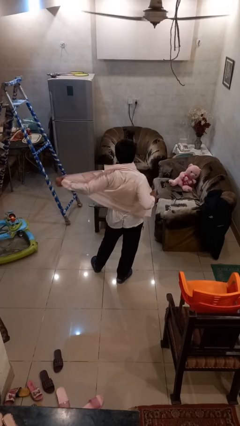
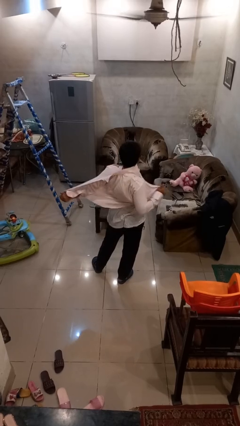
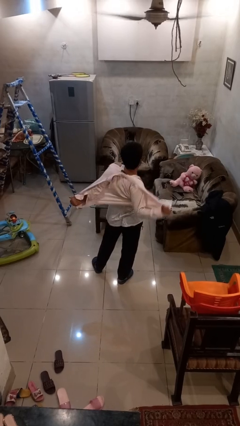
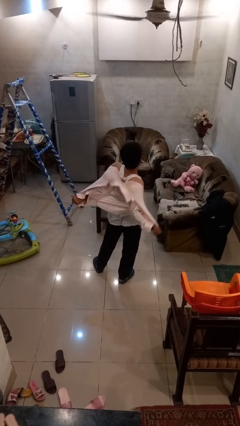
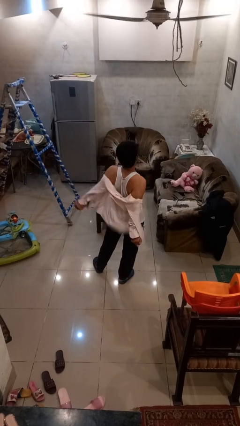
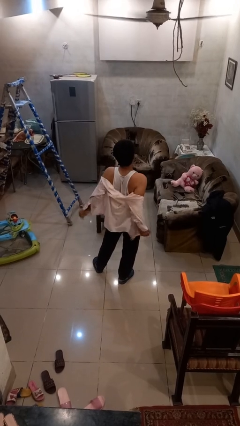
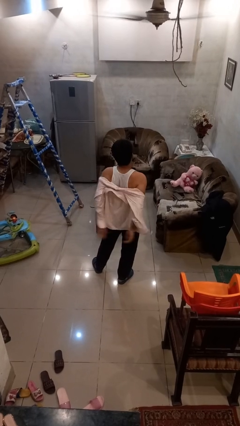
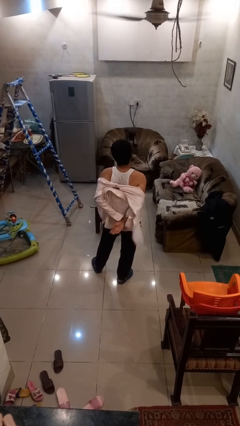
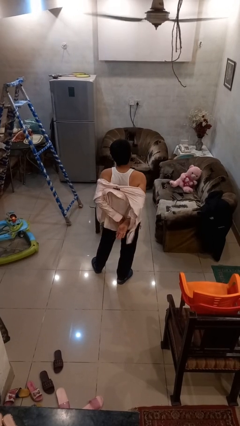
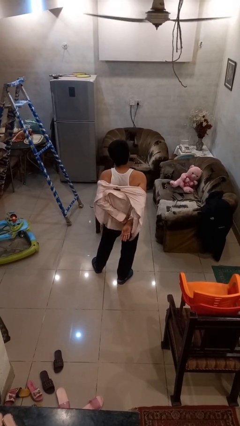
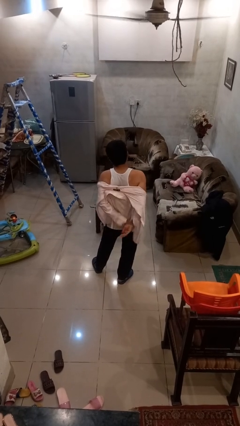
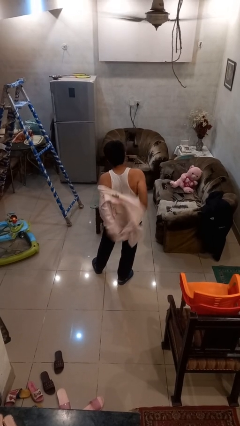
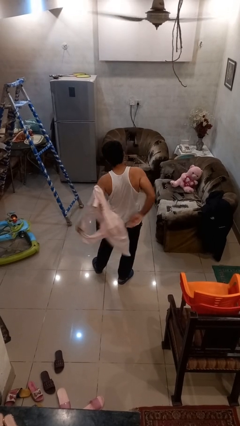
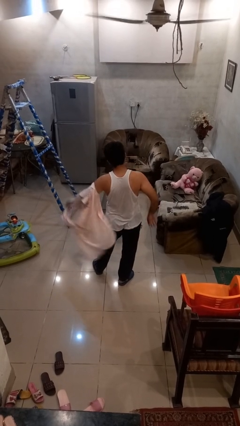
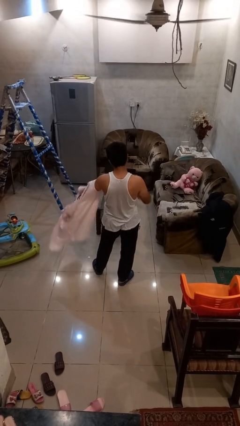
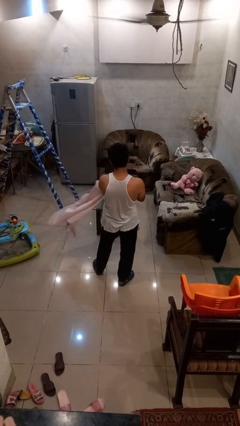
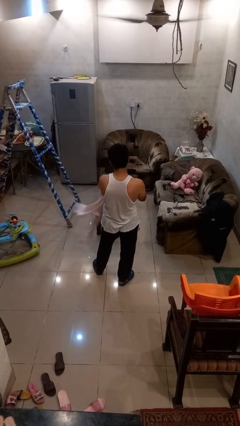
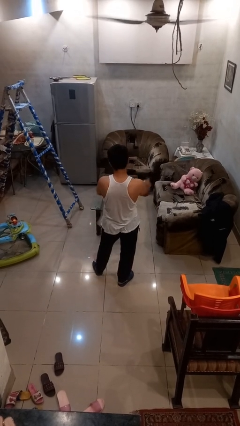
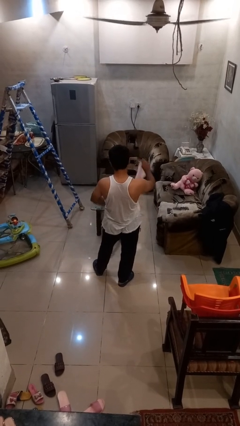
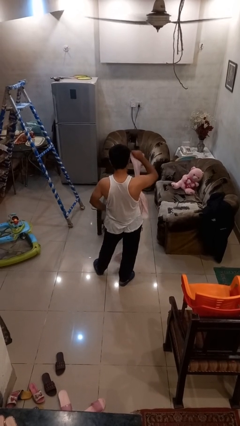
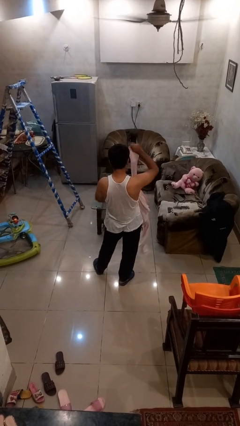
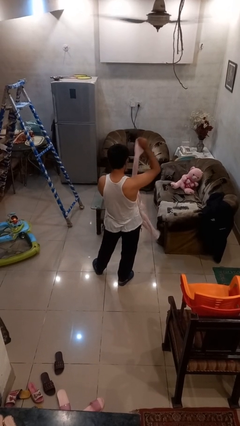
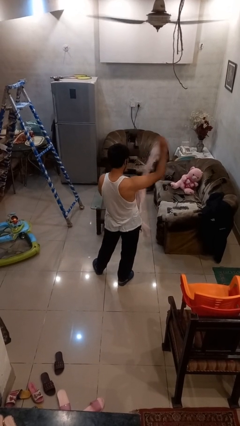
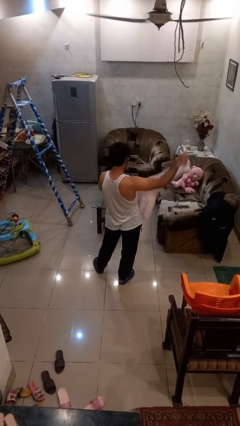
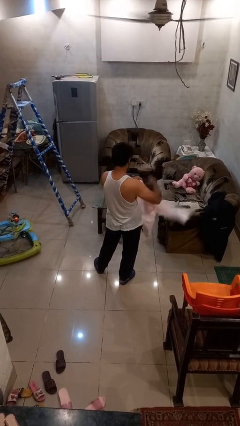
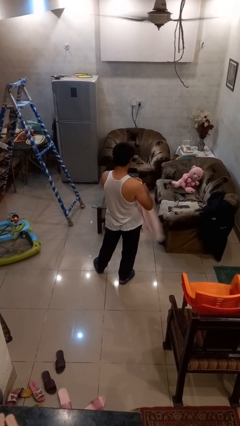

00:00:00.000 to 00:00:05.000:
person takes off shirt

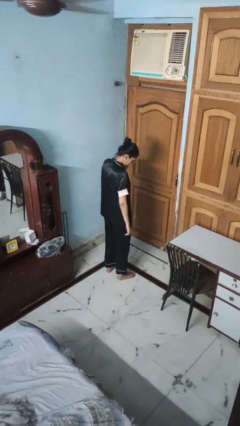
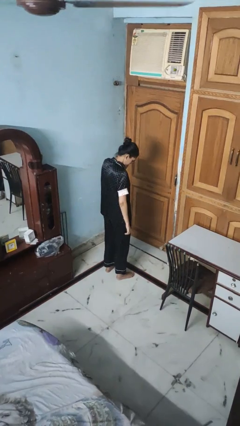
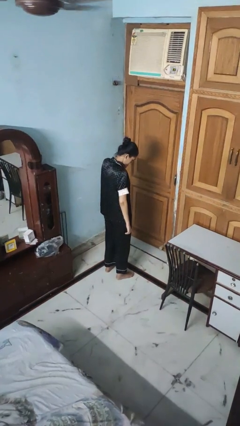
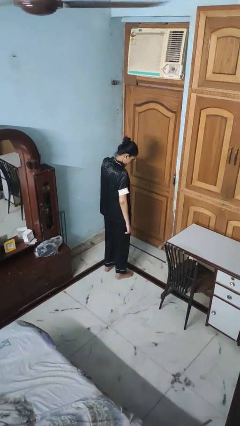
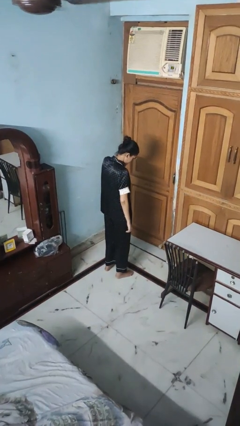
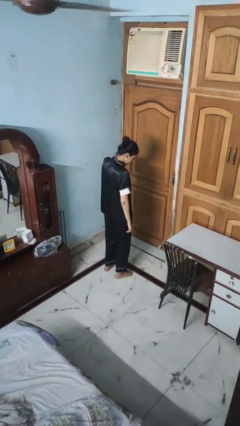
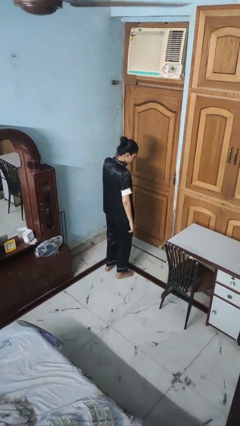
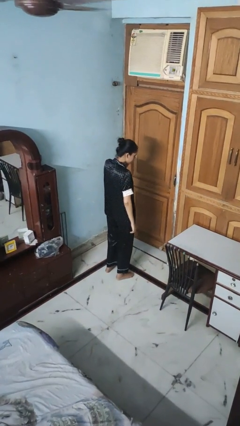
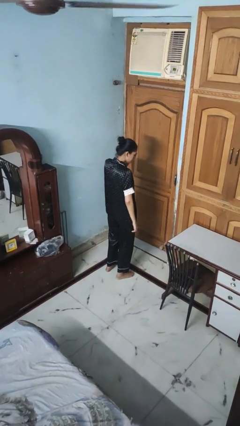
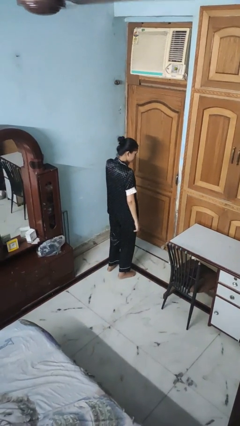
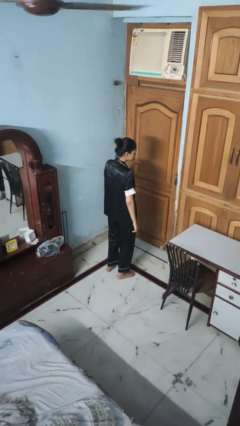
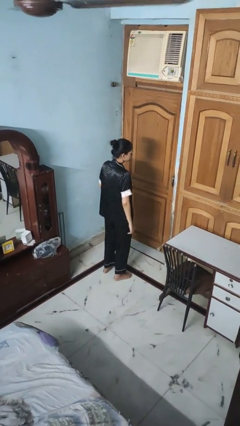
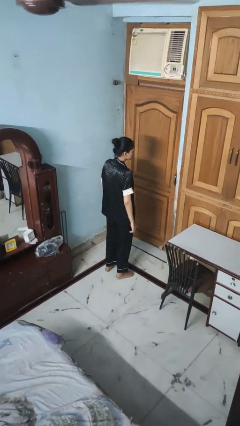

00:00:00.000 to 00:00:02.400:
person rubs eyes

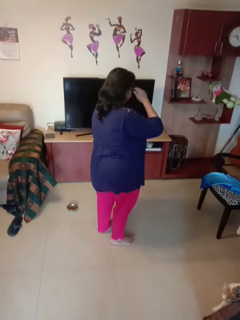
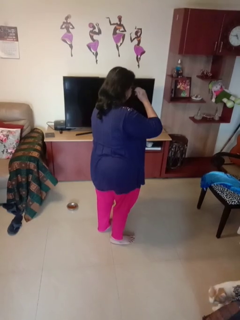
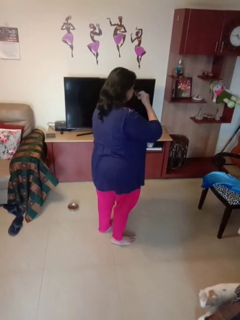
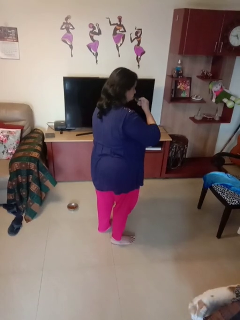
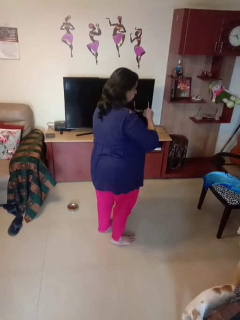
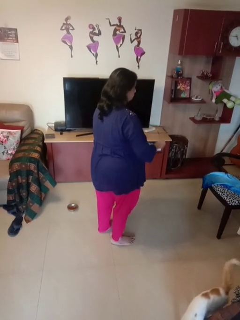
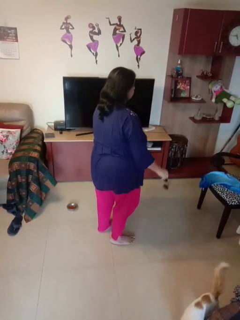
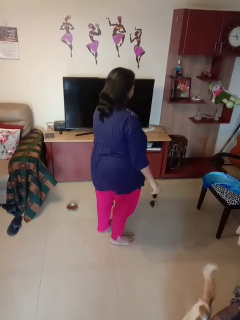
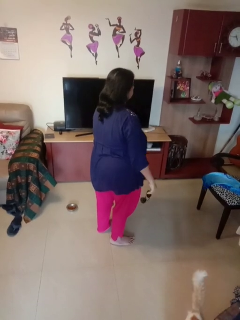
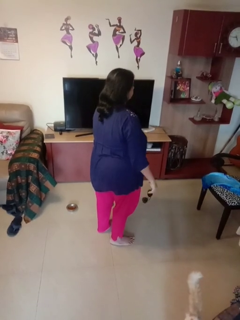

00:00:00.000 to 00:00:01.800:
person takes off sunglasses

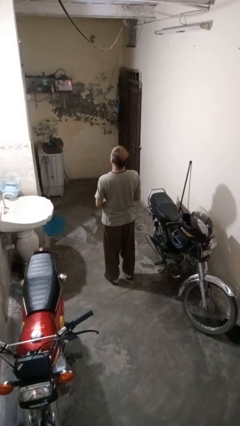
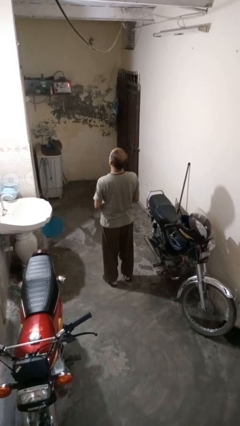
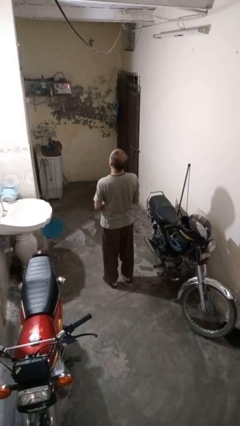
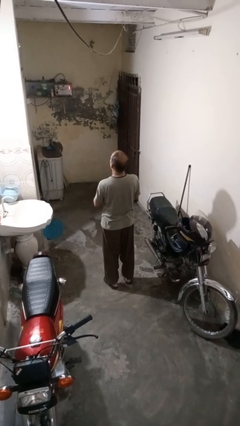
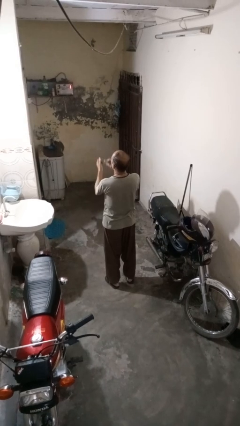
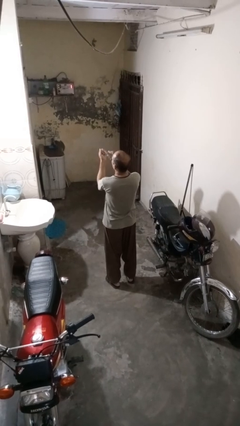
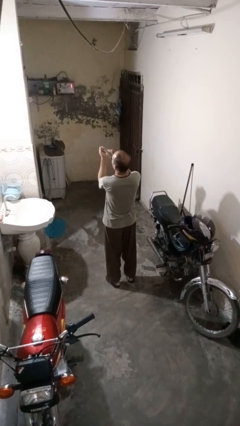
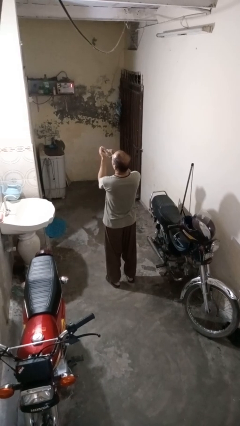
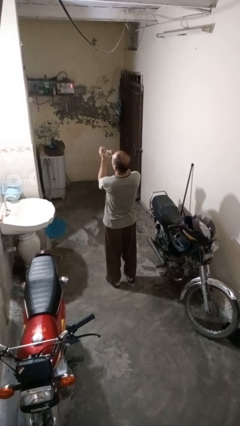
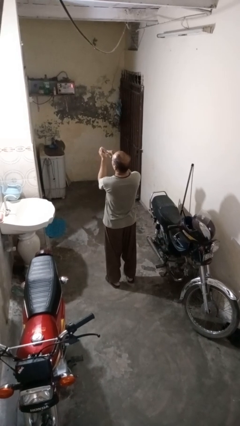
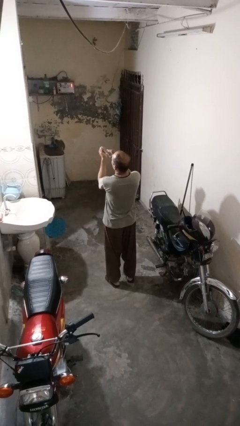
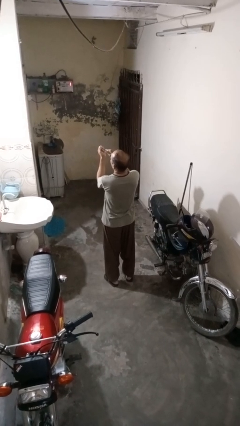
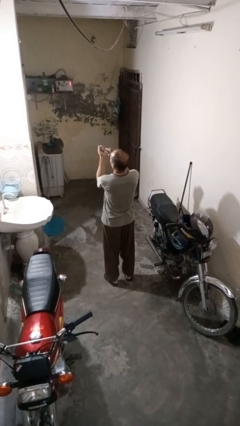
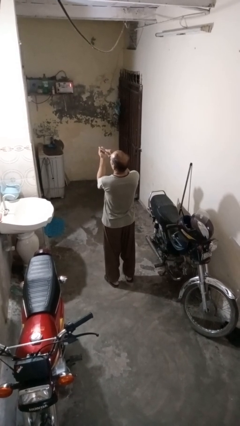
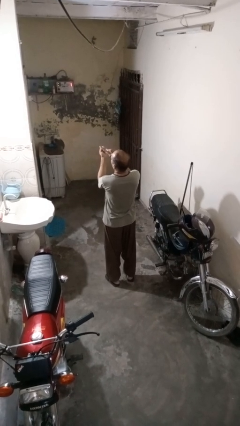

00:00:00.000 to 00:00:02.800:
person clips fingernails

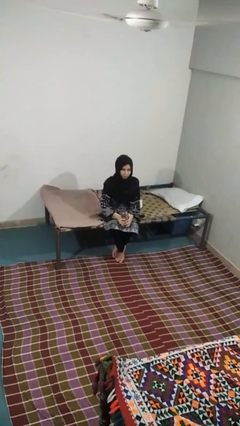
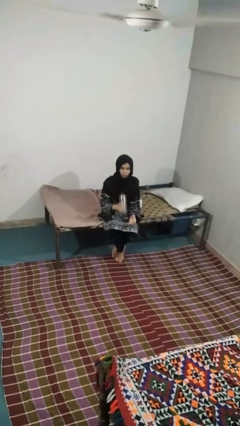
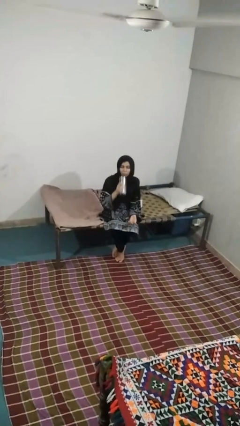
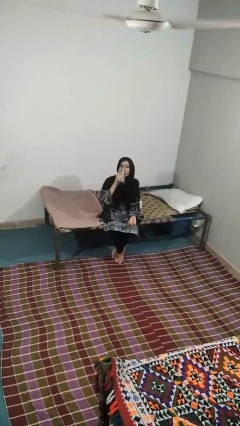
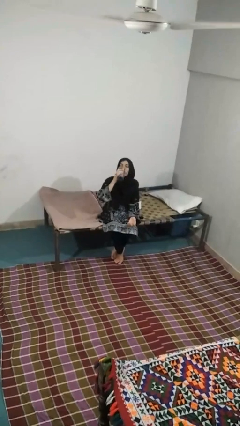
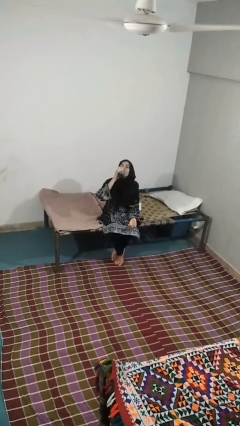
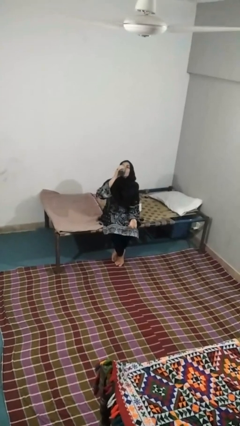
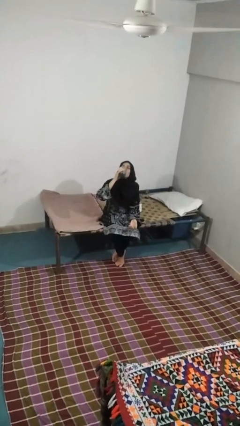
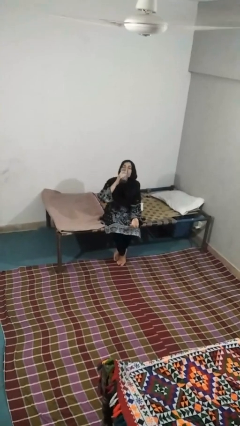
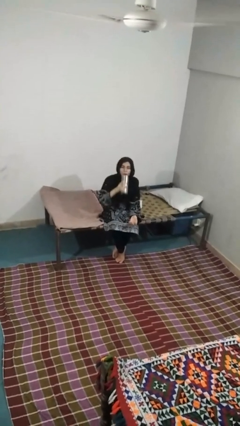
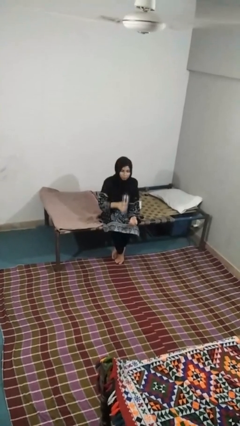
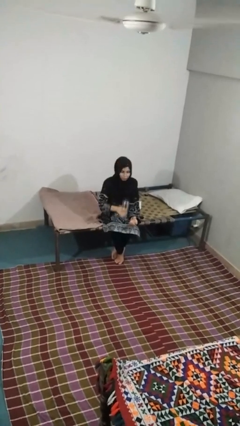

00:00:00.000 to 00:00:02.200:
person drinks from beverage can

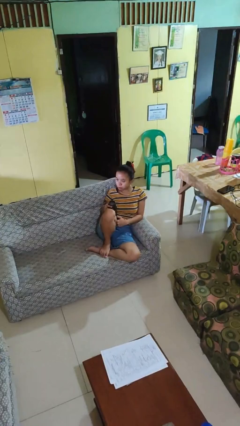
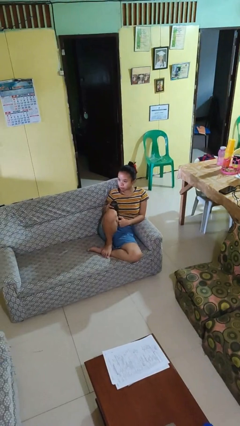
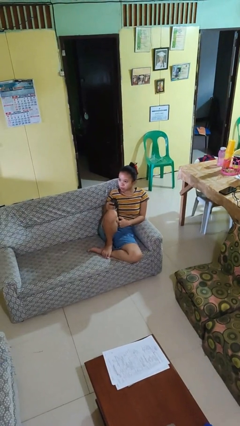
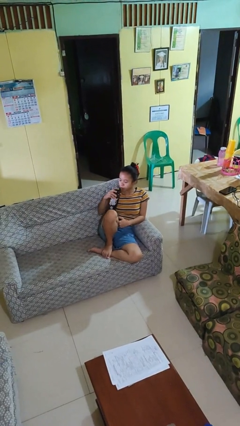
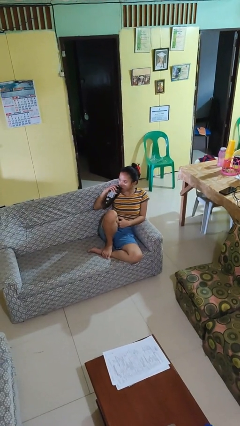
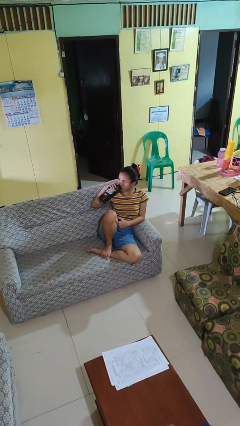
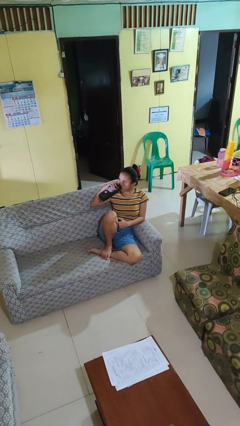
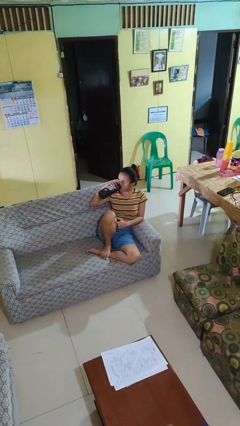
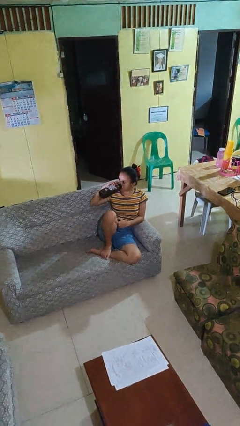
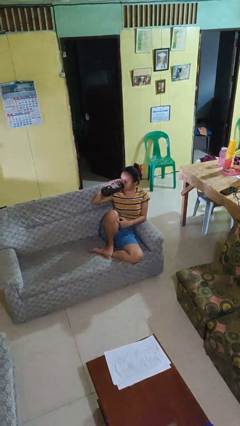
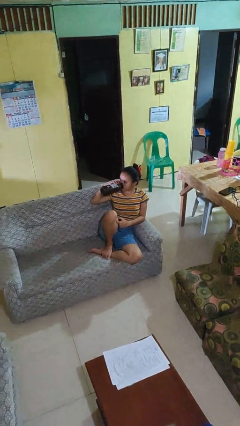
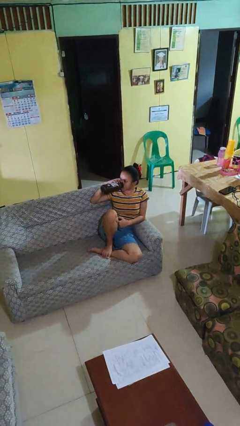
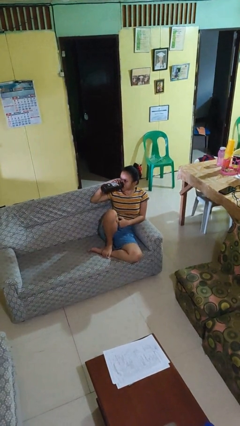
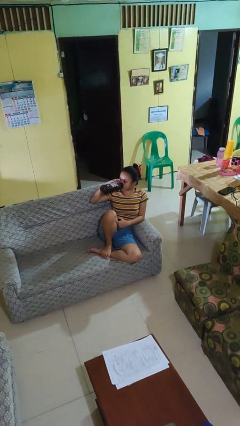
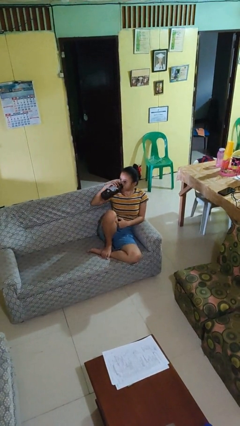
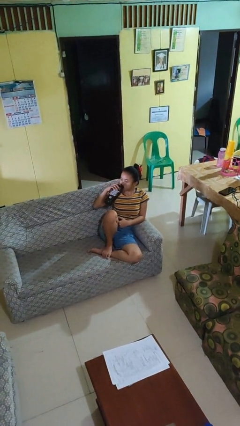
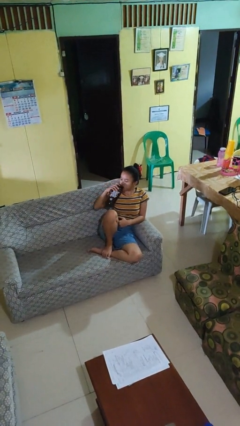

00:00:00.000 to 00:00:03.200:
person drinks from bottle

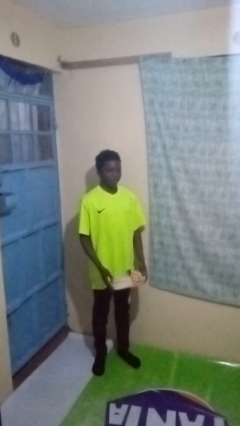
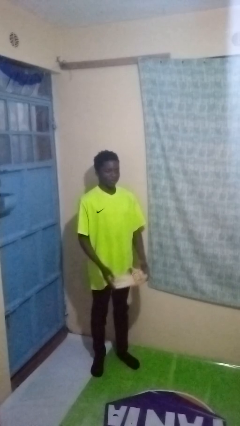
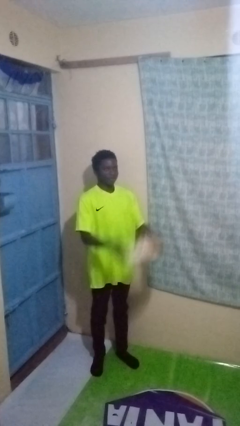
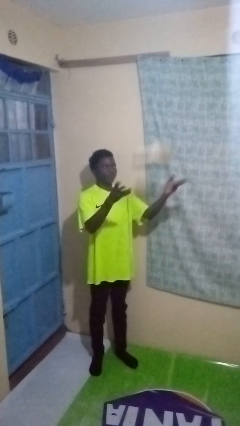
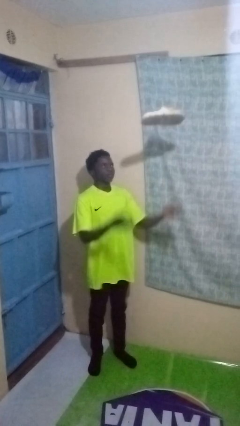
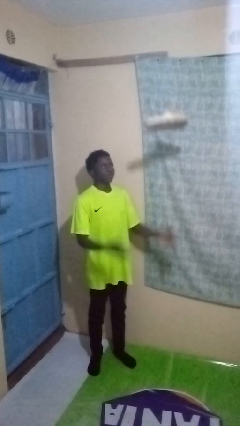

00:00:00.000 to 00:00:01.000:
person throws object into air
